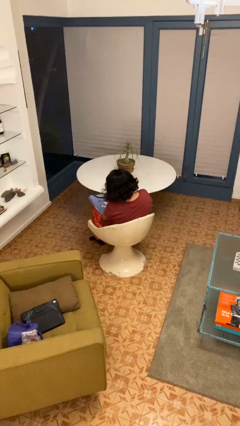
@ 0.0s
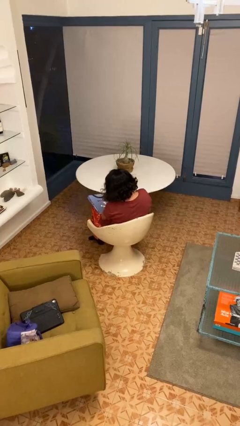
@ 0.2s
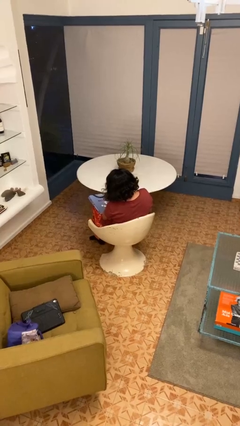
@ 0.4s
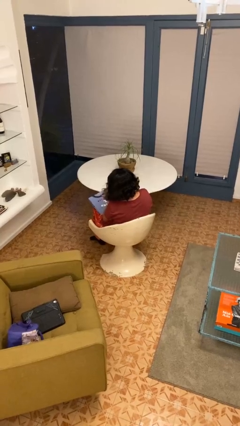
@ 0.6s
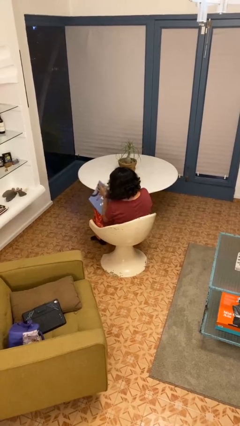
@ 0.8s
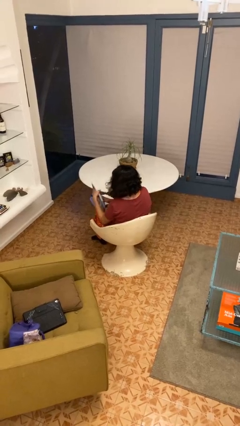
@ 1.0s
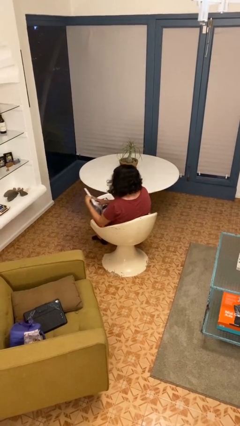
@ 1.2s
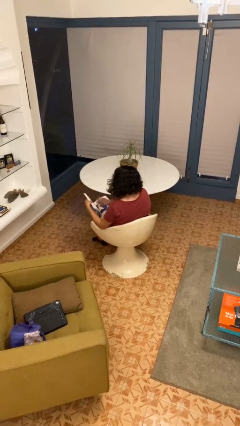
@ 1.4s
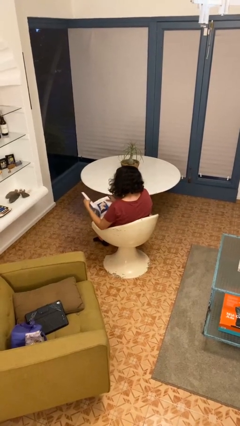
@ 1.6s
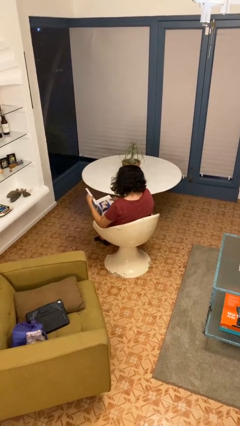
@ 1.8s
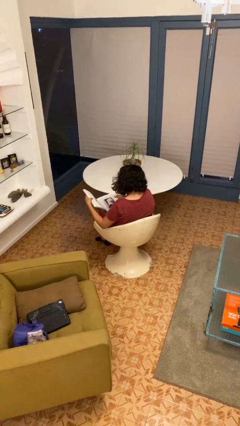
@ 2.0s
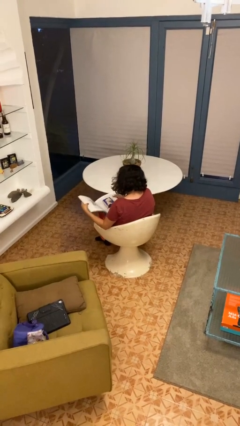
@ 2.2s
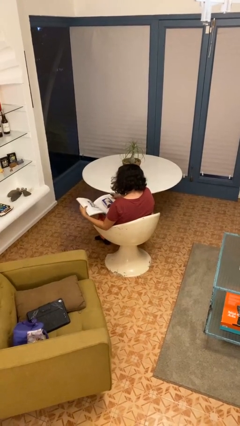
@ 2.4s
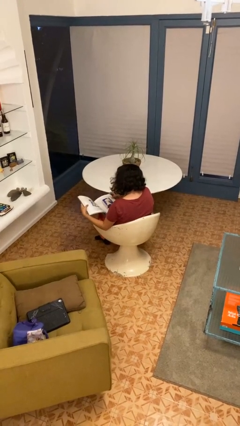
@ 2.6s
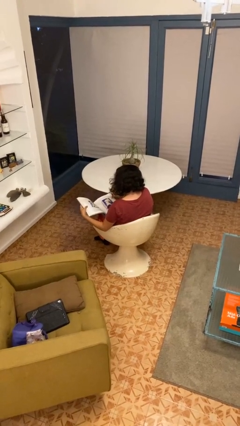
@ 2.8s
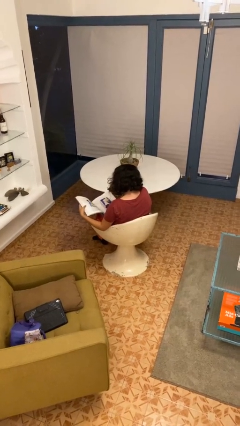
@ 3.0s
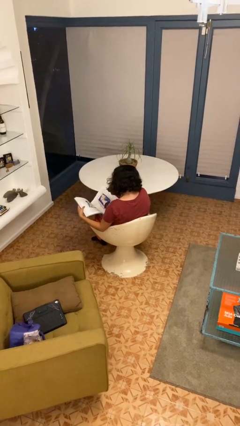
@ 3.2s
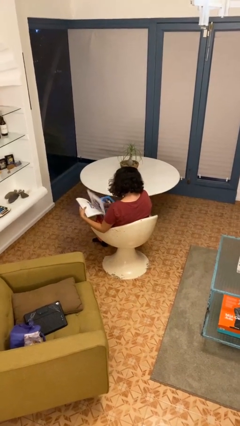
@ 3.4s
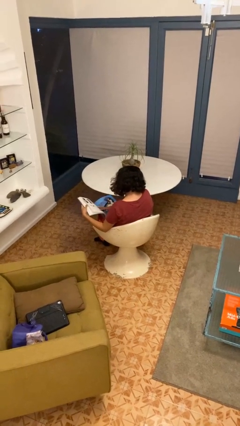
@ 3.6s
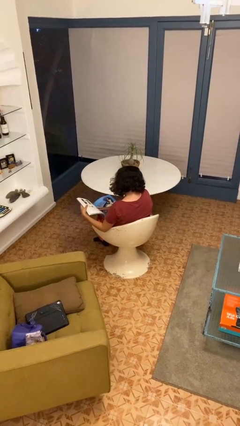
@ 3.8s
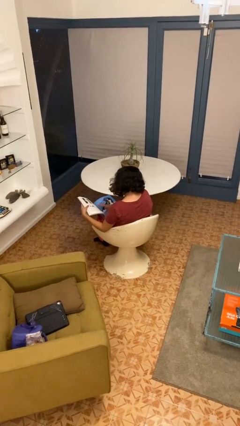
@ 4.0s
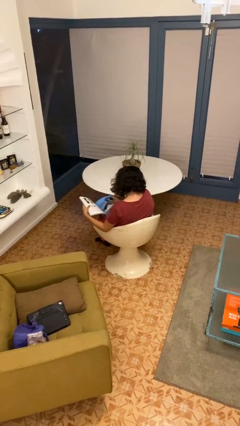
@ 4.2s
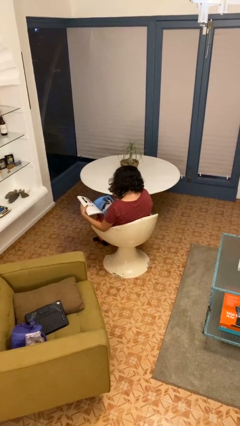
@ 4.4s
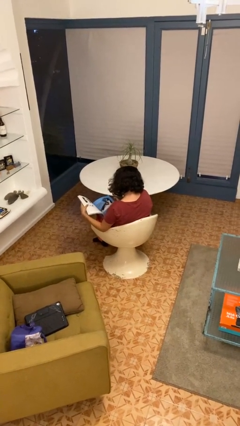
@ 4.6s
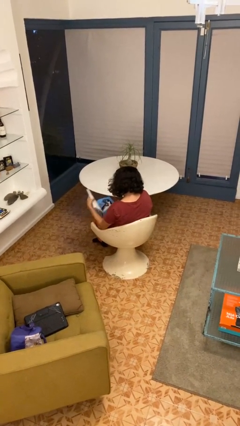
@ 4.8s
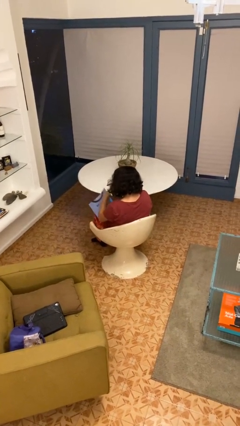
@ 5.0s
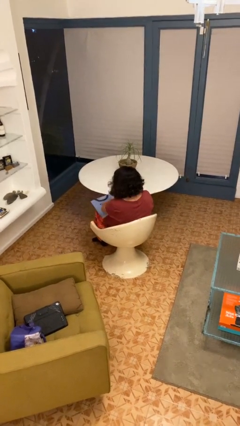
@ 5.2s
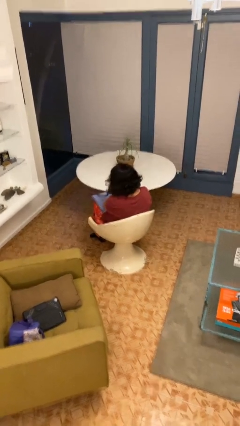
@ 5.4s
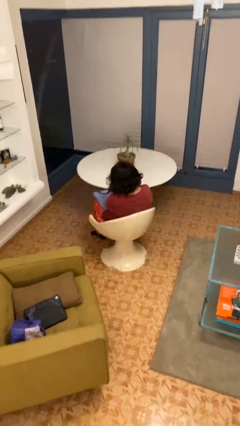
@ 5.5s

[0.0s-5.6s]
person reads book

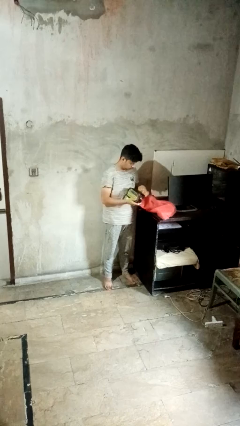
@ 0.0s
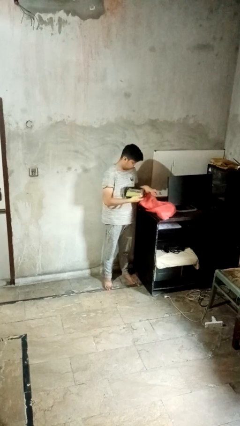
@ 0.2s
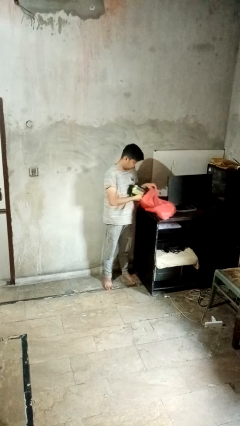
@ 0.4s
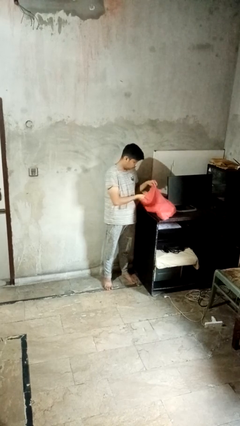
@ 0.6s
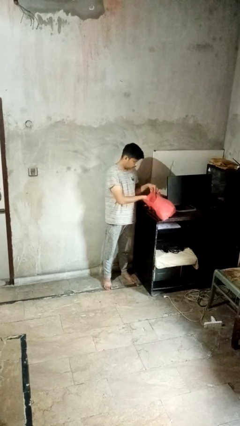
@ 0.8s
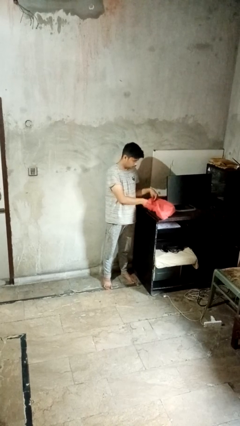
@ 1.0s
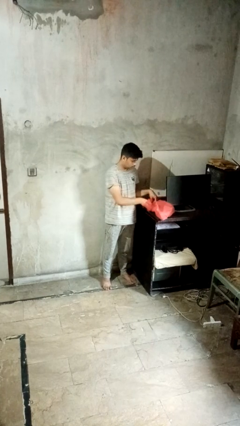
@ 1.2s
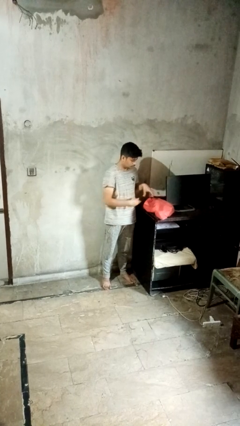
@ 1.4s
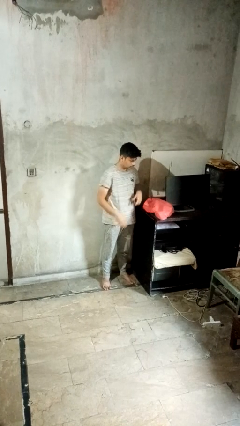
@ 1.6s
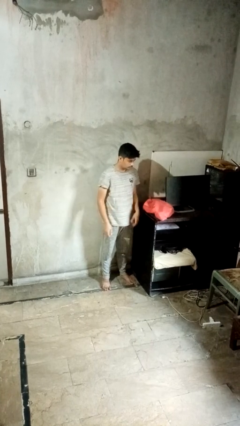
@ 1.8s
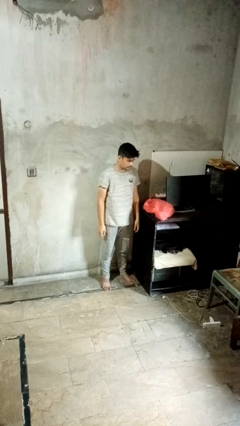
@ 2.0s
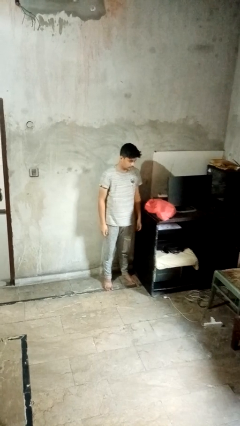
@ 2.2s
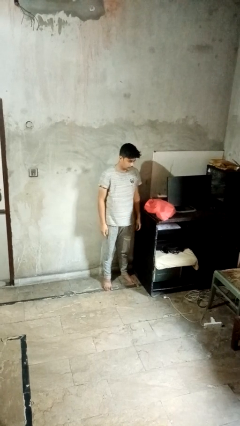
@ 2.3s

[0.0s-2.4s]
person puts object into bag

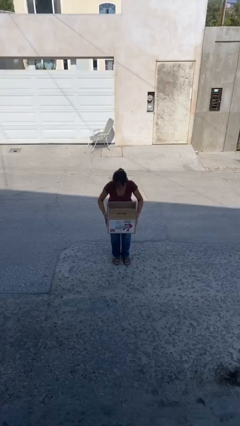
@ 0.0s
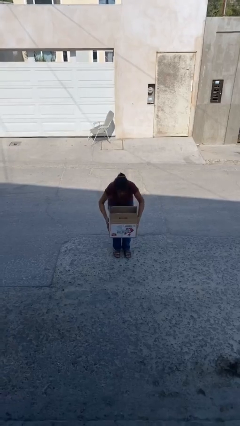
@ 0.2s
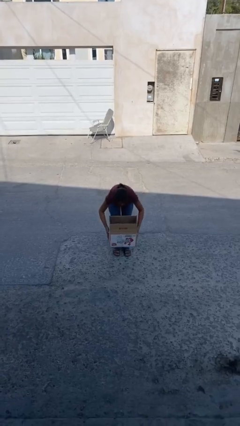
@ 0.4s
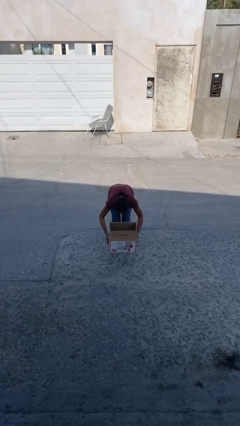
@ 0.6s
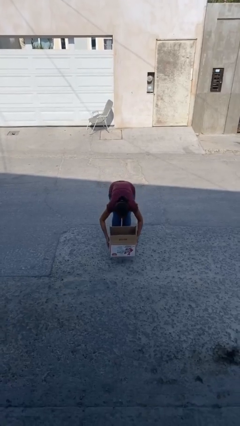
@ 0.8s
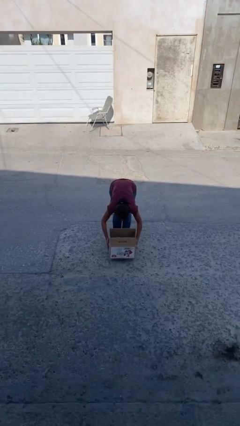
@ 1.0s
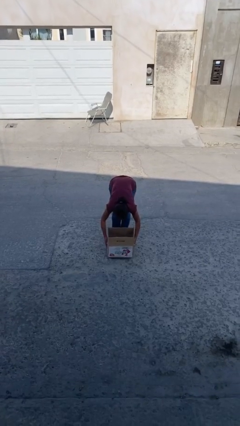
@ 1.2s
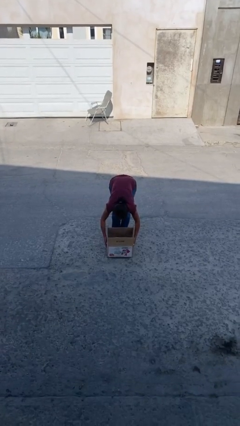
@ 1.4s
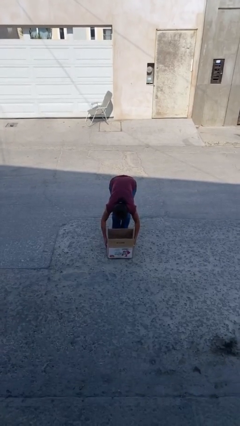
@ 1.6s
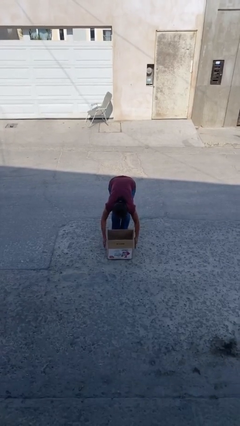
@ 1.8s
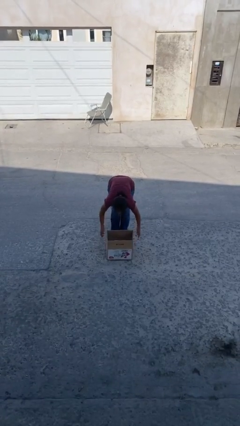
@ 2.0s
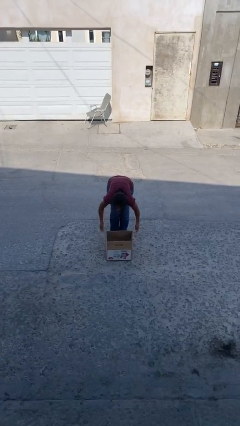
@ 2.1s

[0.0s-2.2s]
person puts down object on floor

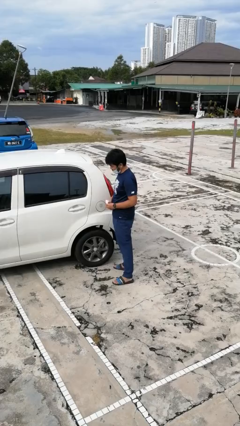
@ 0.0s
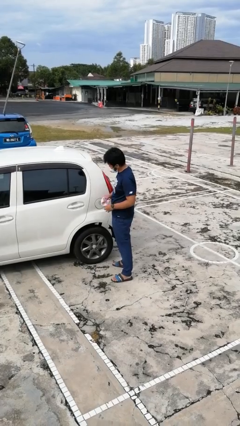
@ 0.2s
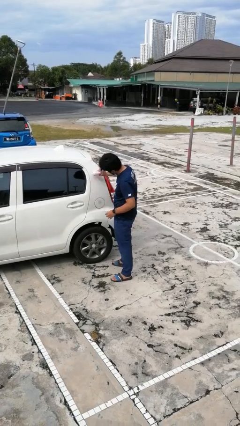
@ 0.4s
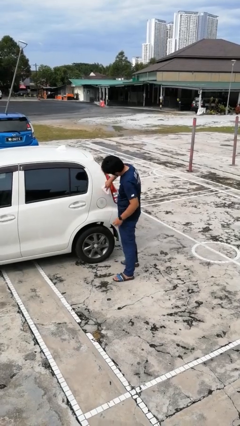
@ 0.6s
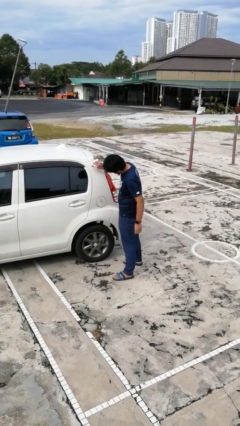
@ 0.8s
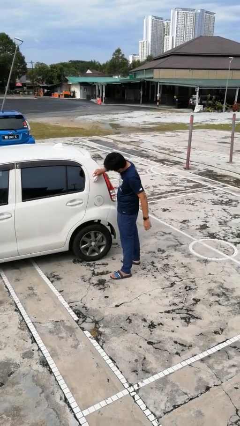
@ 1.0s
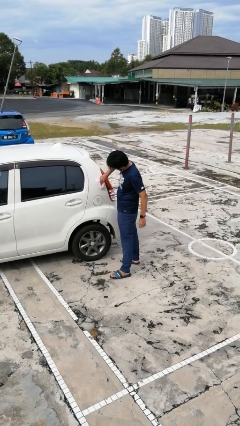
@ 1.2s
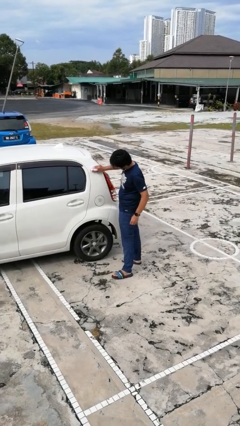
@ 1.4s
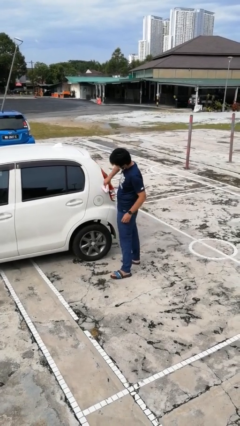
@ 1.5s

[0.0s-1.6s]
person polishes car with rag

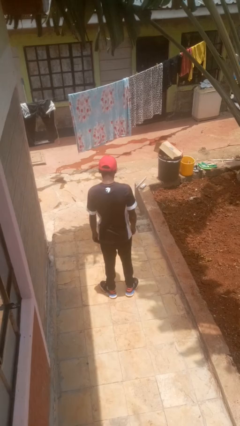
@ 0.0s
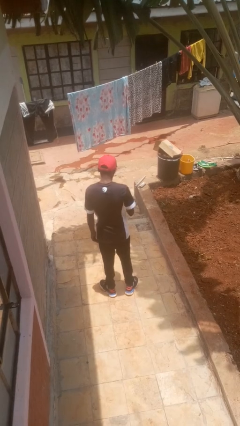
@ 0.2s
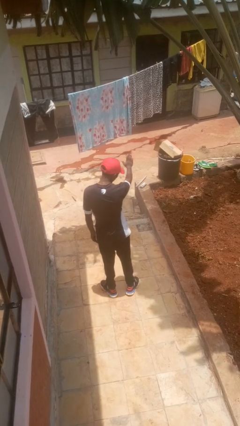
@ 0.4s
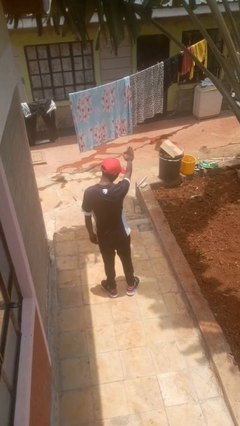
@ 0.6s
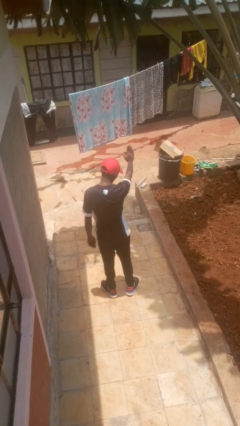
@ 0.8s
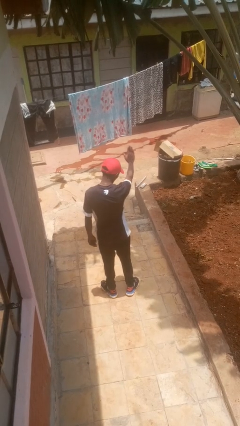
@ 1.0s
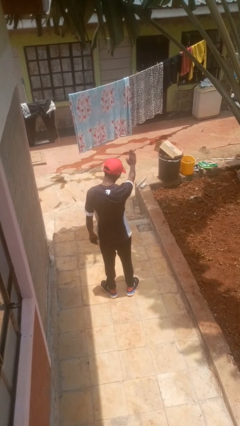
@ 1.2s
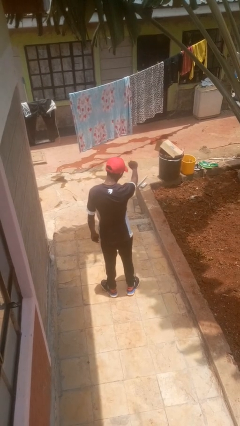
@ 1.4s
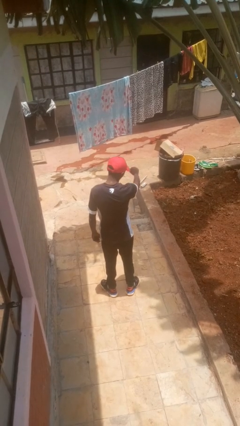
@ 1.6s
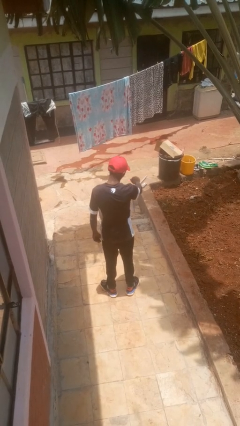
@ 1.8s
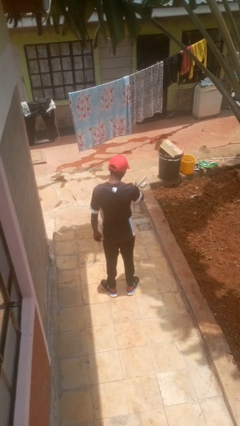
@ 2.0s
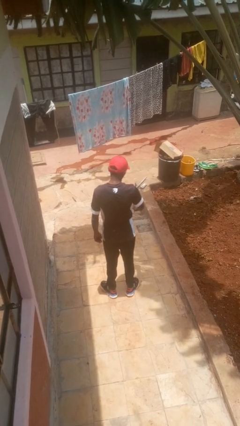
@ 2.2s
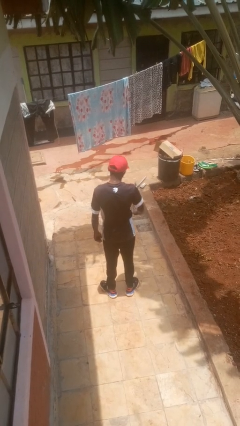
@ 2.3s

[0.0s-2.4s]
person gestures stop

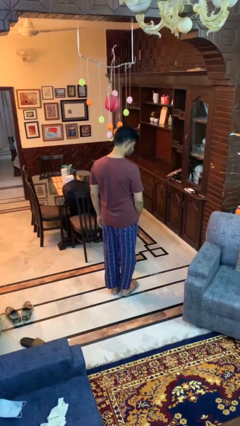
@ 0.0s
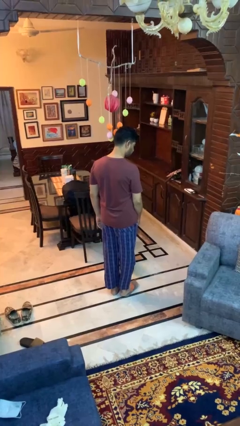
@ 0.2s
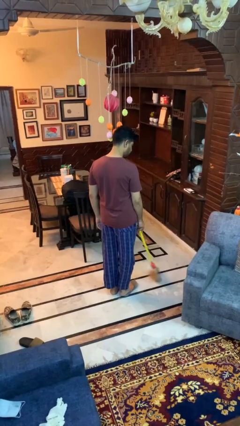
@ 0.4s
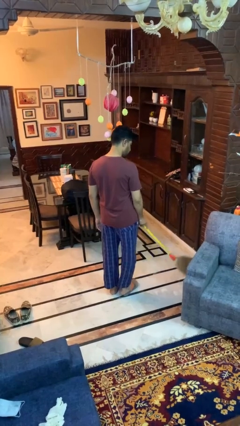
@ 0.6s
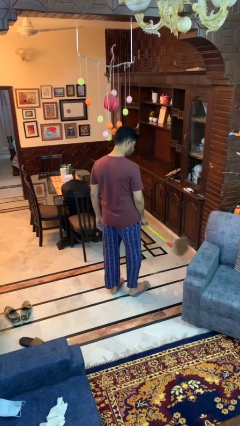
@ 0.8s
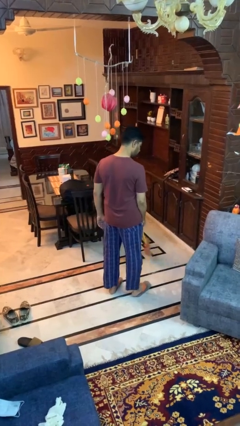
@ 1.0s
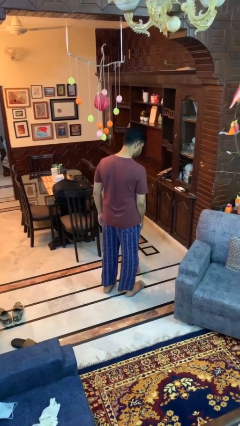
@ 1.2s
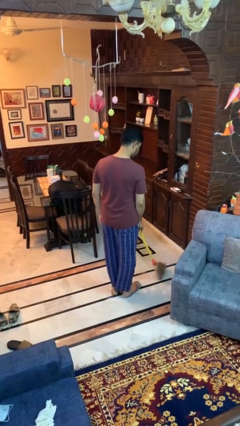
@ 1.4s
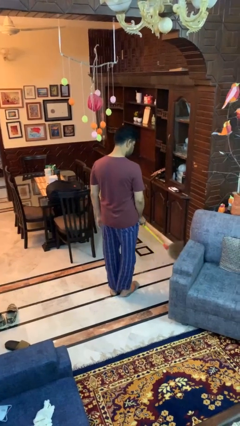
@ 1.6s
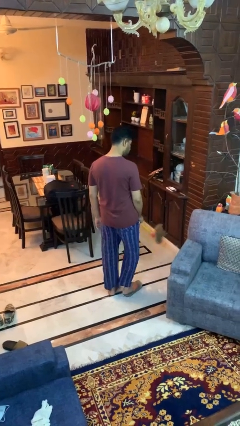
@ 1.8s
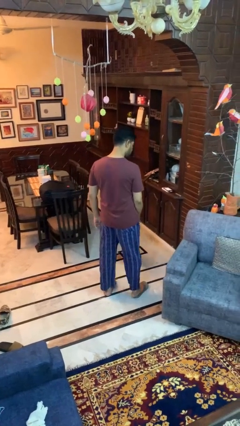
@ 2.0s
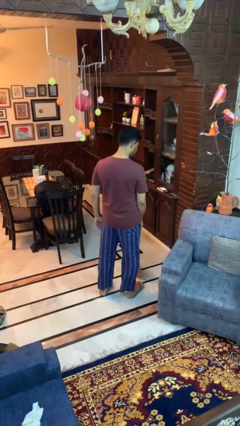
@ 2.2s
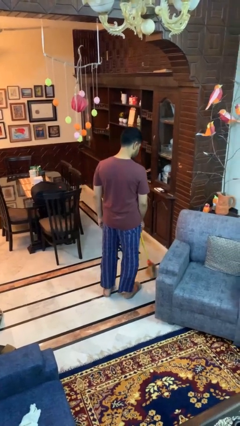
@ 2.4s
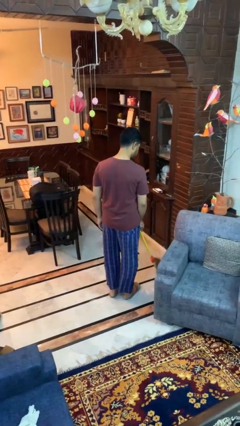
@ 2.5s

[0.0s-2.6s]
person sweeps floor

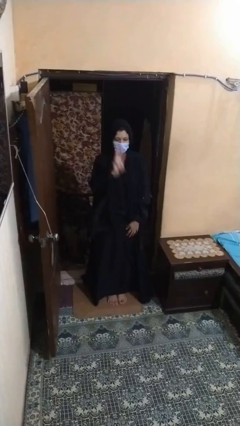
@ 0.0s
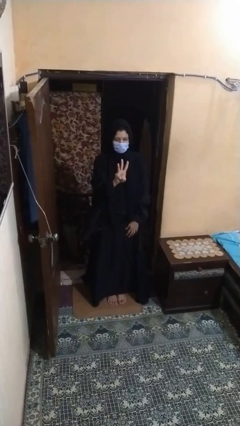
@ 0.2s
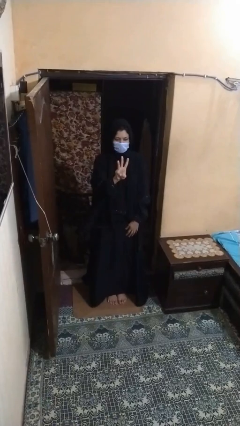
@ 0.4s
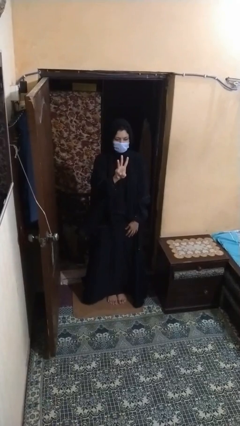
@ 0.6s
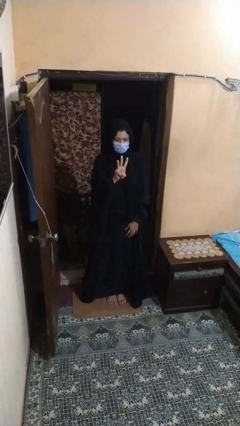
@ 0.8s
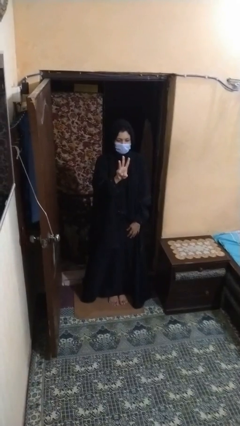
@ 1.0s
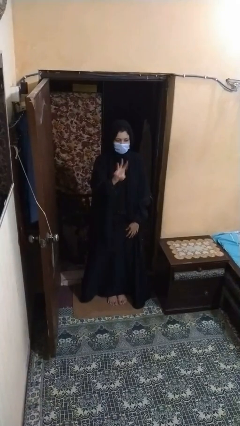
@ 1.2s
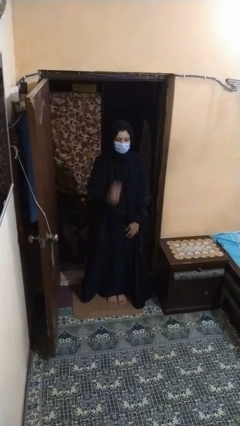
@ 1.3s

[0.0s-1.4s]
person gestures number three
